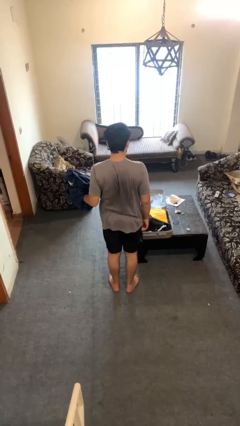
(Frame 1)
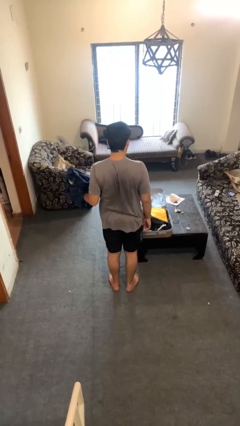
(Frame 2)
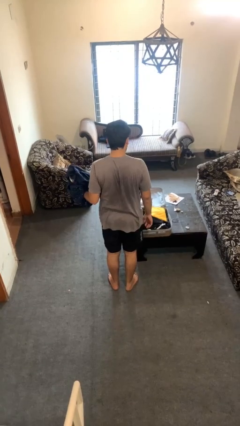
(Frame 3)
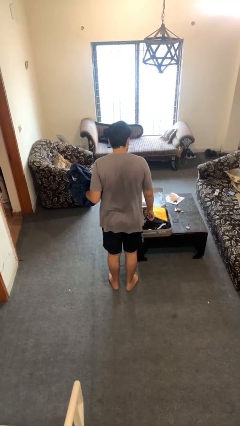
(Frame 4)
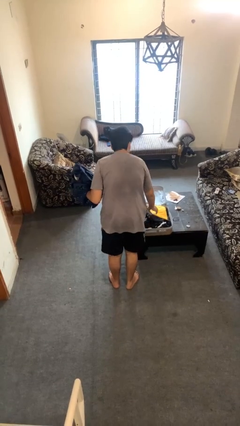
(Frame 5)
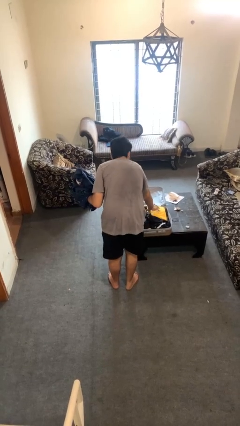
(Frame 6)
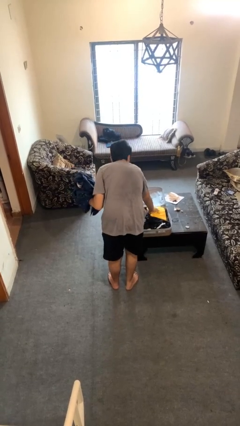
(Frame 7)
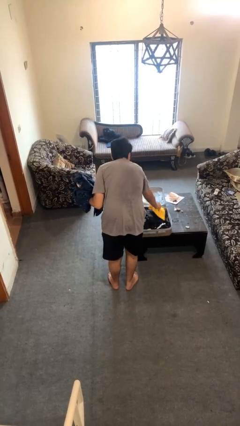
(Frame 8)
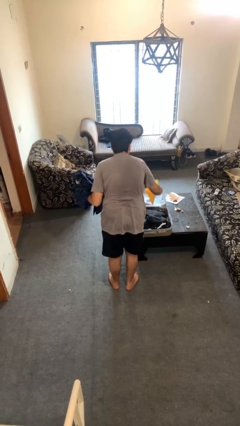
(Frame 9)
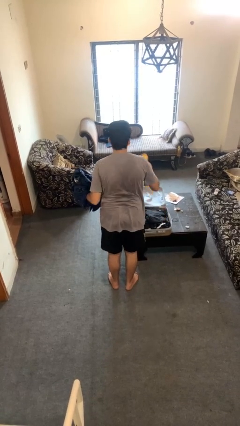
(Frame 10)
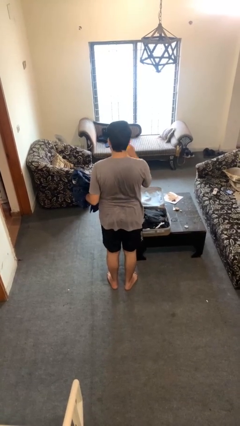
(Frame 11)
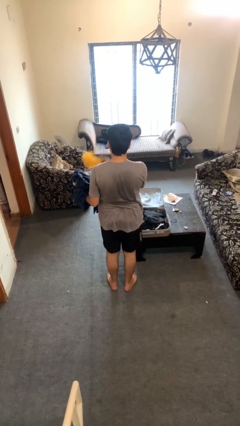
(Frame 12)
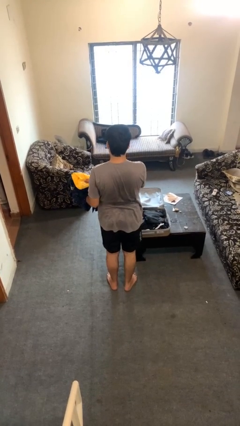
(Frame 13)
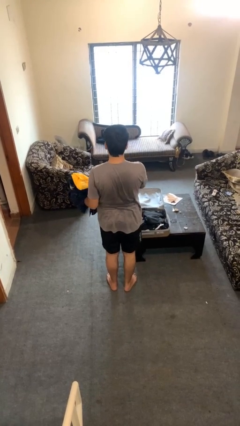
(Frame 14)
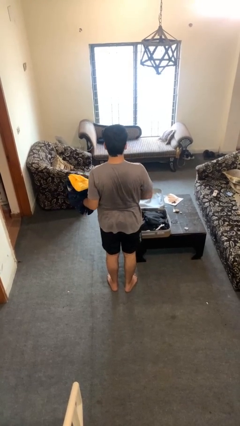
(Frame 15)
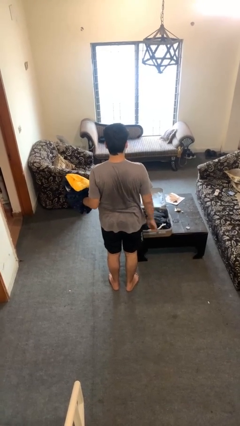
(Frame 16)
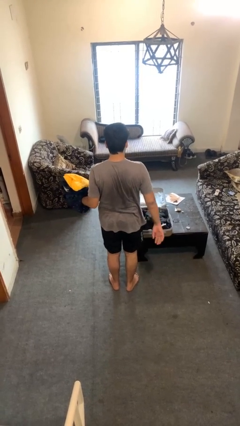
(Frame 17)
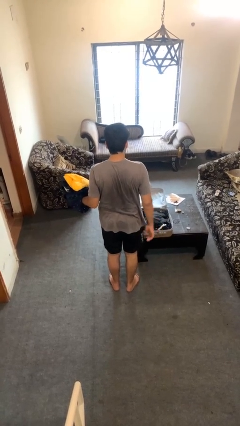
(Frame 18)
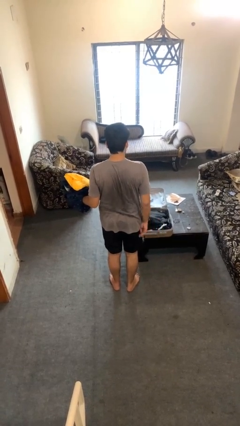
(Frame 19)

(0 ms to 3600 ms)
person unloads clothes from suitcase

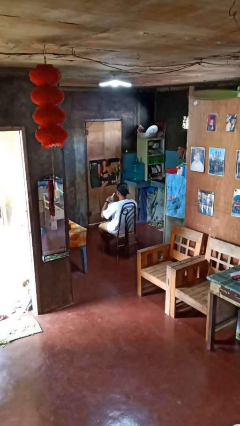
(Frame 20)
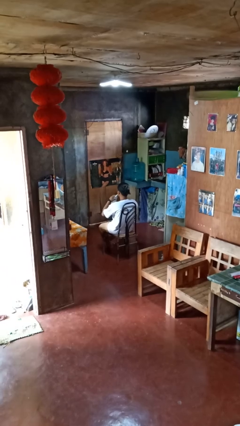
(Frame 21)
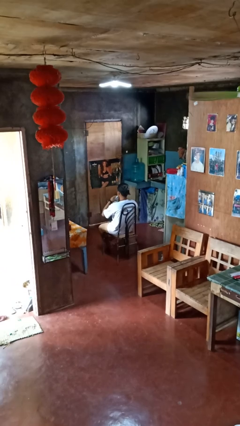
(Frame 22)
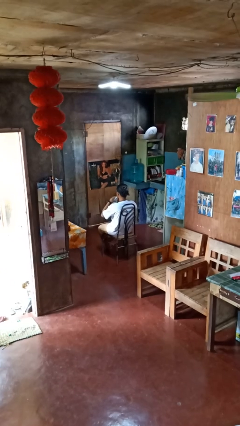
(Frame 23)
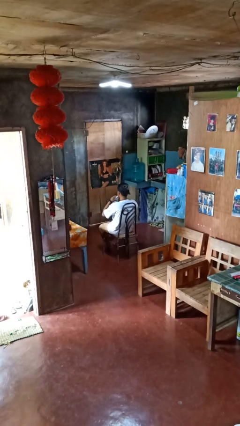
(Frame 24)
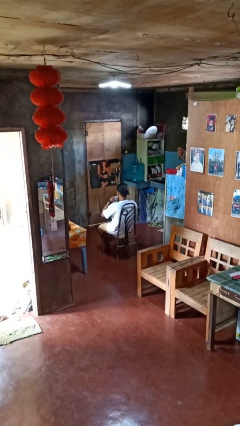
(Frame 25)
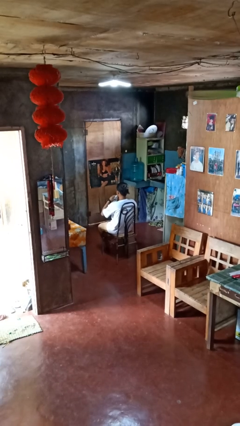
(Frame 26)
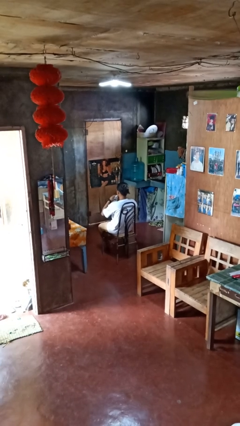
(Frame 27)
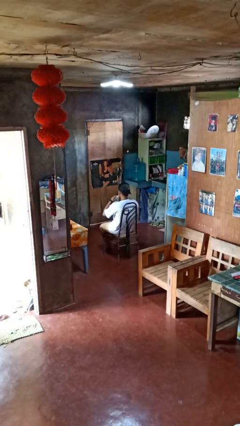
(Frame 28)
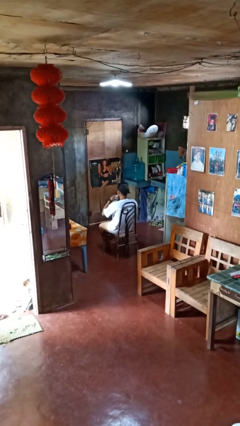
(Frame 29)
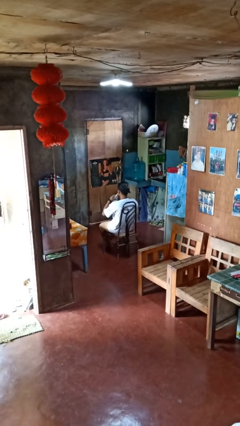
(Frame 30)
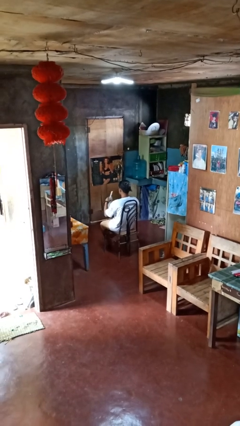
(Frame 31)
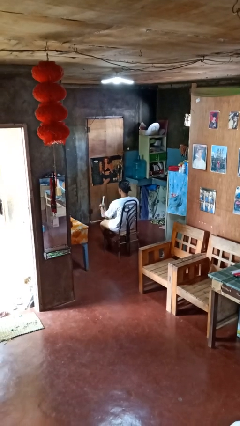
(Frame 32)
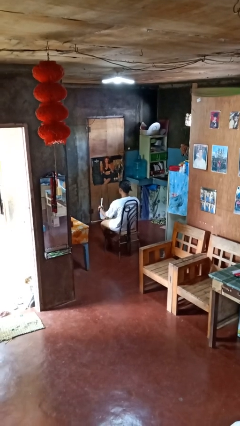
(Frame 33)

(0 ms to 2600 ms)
person drinks from straw

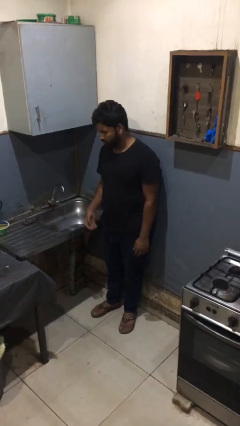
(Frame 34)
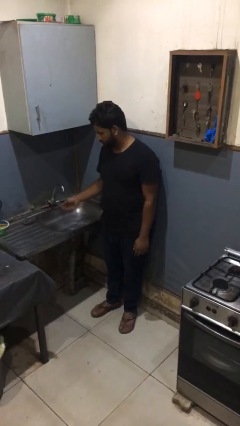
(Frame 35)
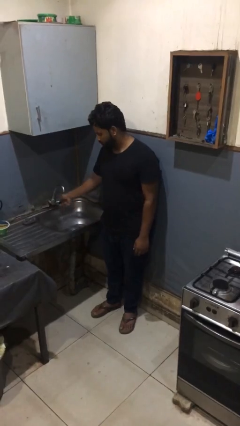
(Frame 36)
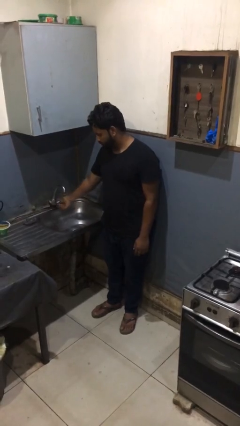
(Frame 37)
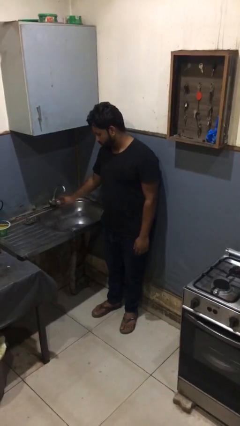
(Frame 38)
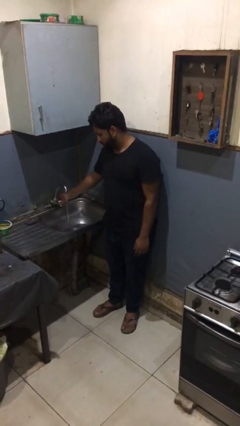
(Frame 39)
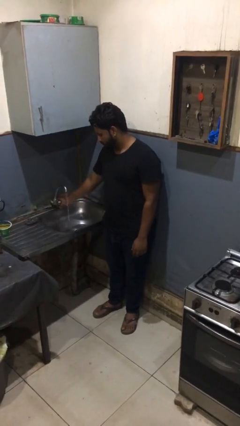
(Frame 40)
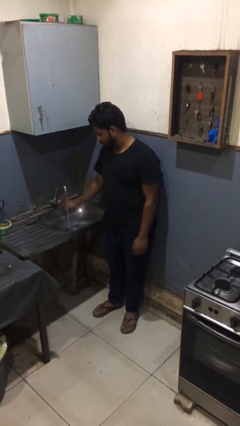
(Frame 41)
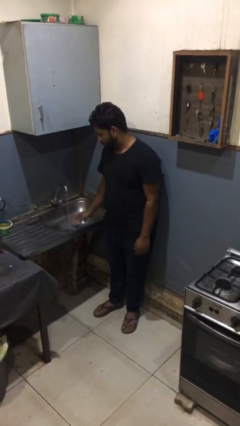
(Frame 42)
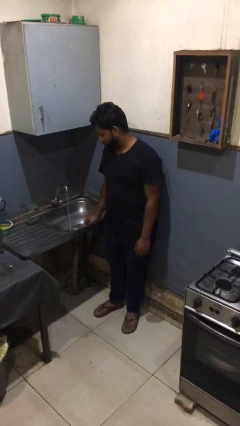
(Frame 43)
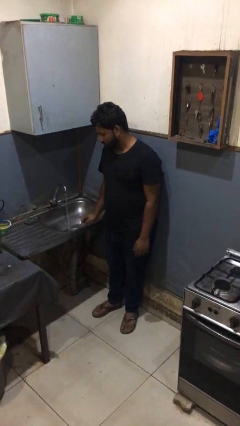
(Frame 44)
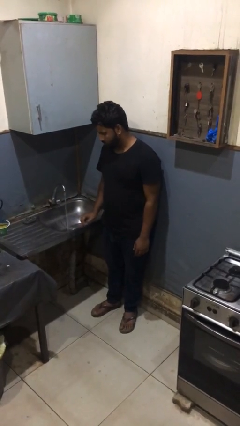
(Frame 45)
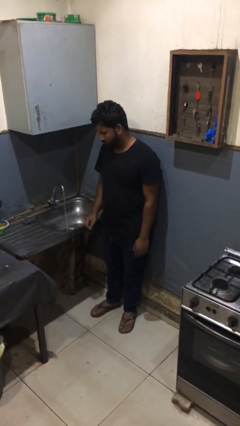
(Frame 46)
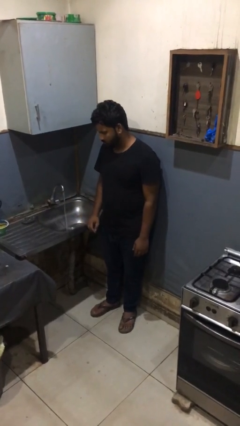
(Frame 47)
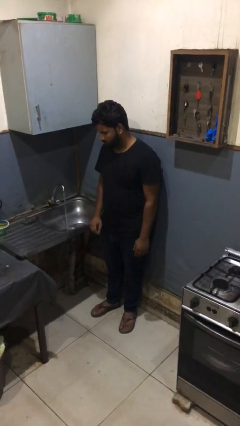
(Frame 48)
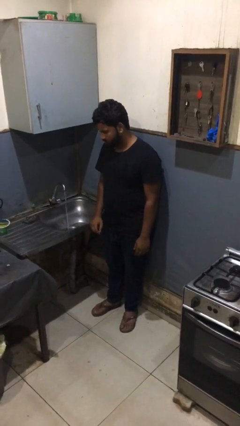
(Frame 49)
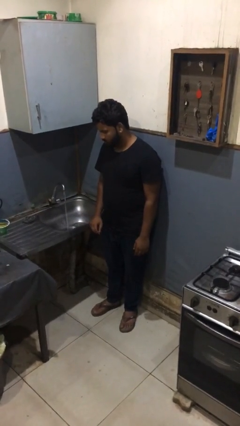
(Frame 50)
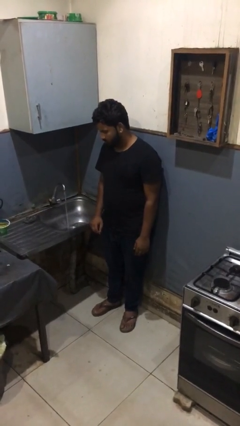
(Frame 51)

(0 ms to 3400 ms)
person turns on faucet

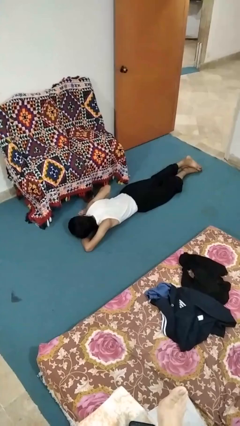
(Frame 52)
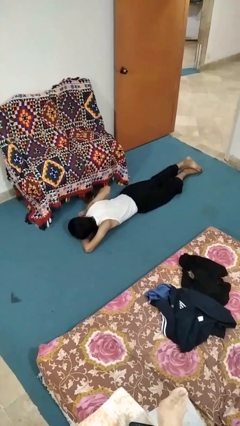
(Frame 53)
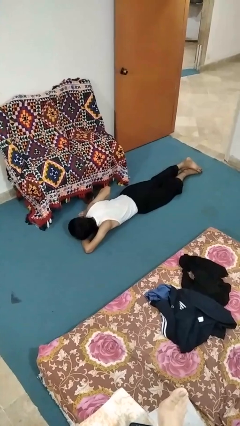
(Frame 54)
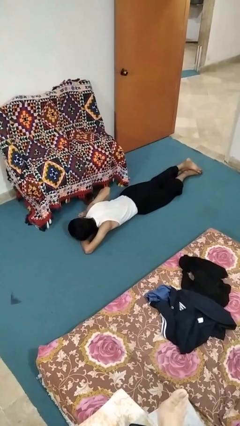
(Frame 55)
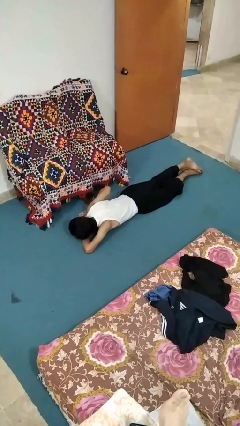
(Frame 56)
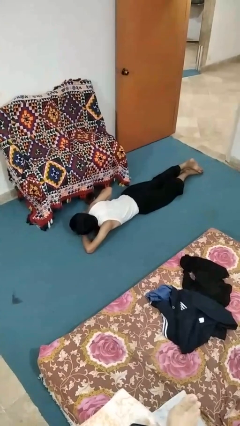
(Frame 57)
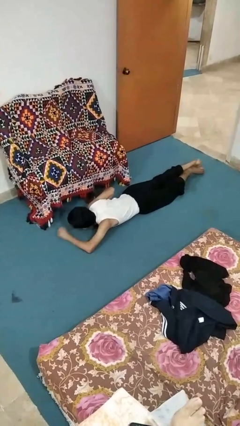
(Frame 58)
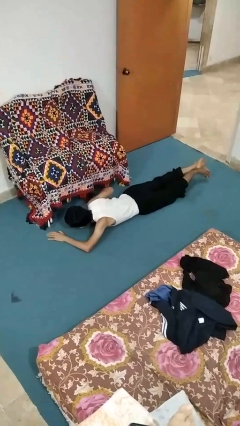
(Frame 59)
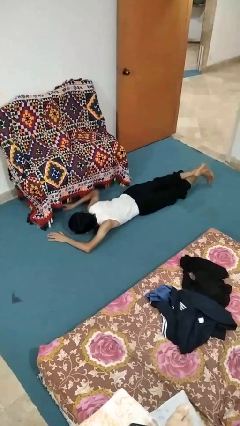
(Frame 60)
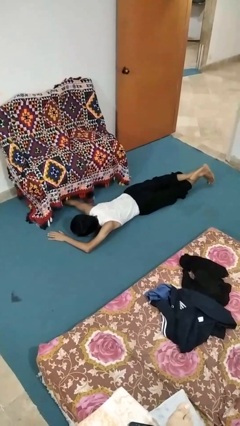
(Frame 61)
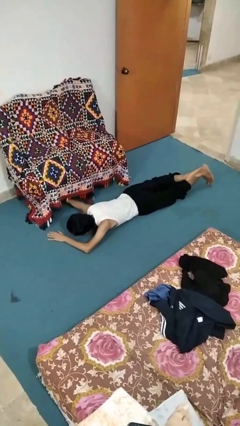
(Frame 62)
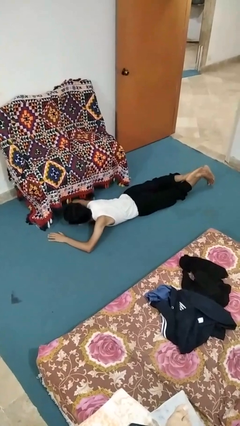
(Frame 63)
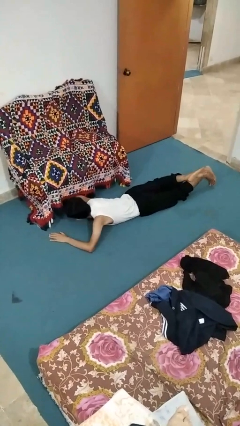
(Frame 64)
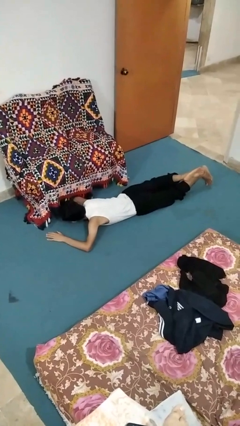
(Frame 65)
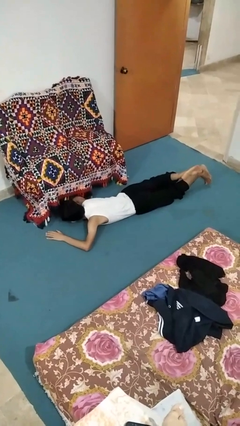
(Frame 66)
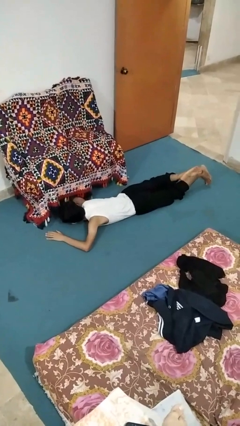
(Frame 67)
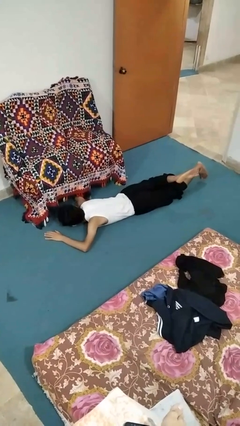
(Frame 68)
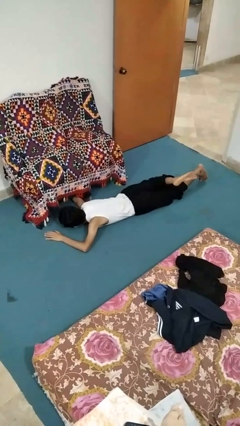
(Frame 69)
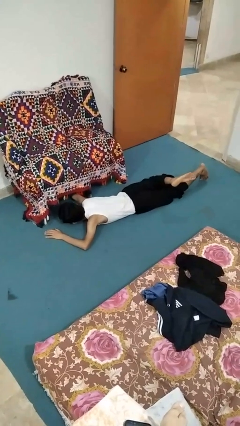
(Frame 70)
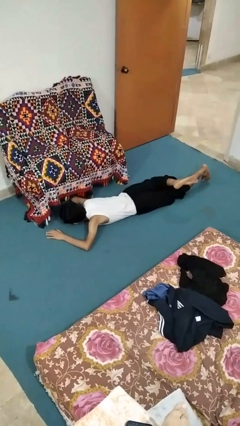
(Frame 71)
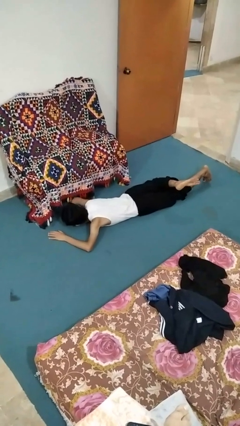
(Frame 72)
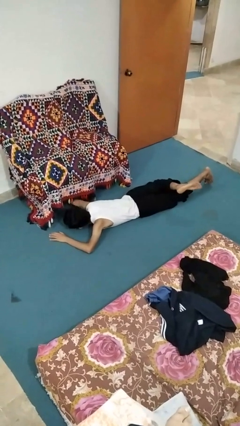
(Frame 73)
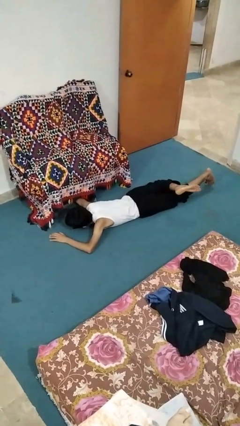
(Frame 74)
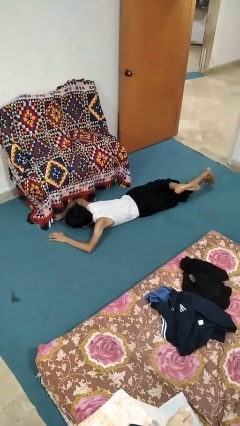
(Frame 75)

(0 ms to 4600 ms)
person searches under couch

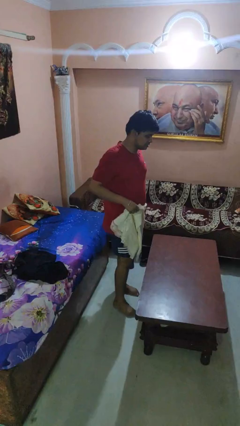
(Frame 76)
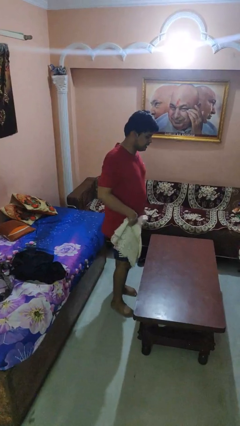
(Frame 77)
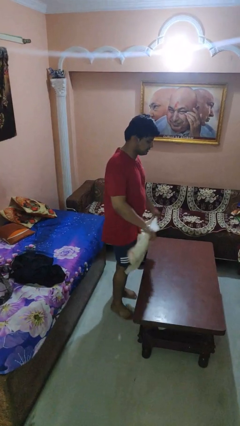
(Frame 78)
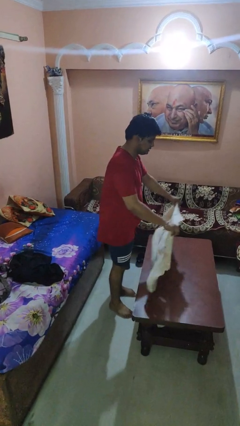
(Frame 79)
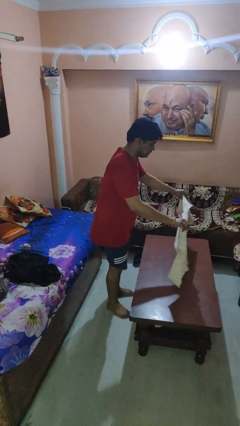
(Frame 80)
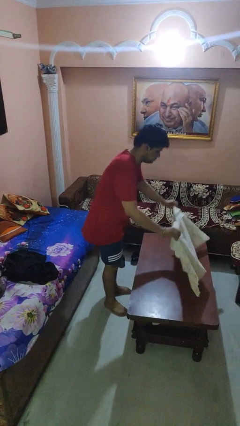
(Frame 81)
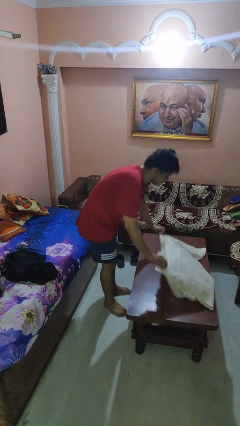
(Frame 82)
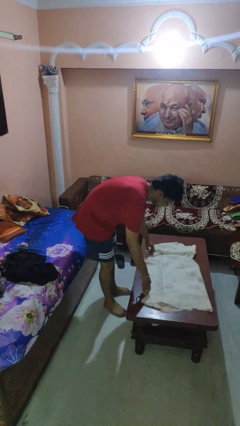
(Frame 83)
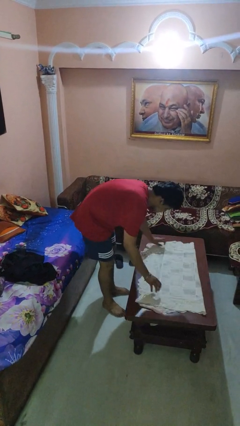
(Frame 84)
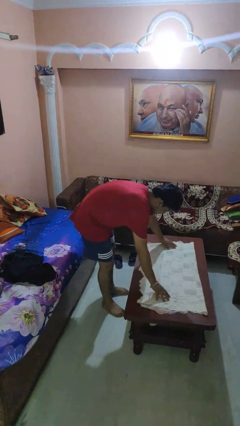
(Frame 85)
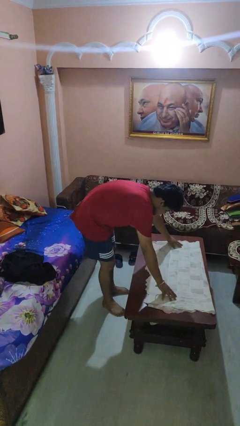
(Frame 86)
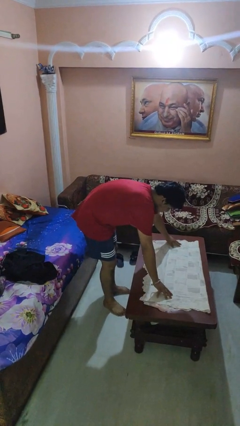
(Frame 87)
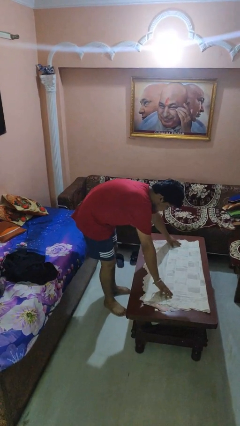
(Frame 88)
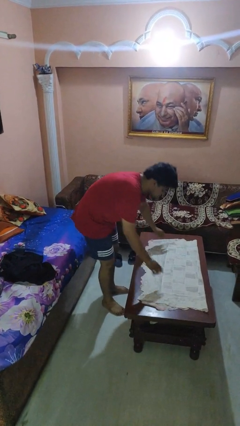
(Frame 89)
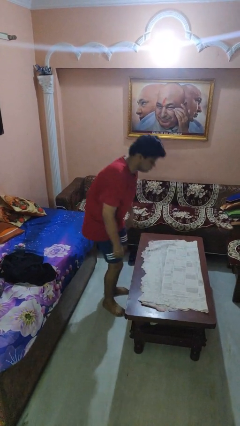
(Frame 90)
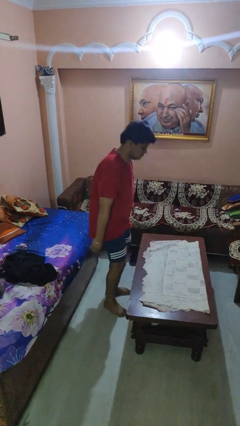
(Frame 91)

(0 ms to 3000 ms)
person spreads tablecloth

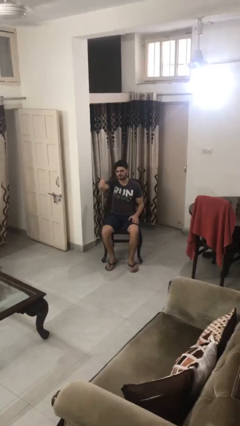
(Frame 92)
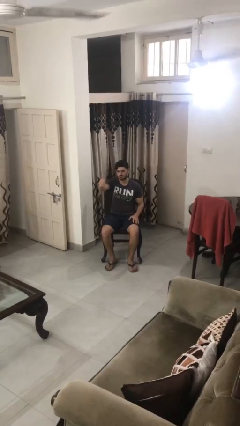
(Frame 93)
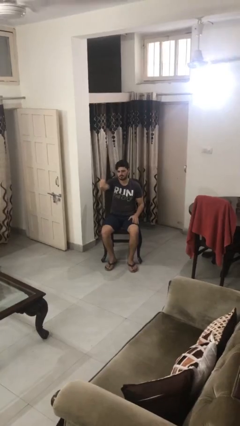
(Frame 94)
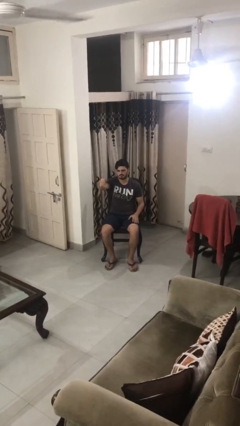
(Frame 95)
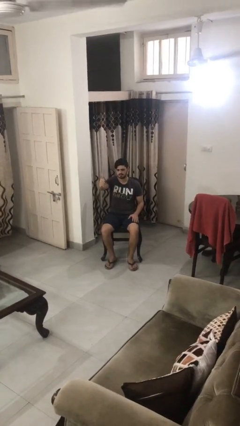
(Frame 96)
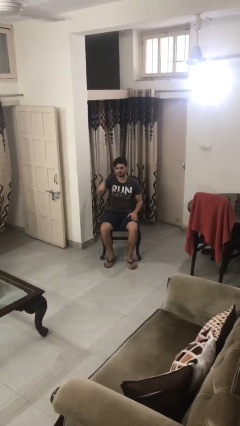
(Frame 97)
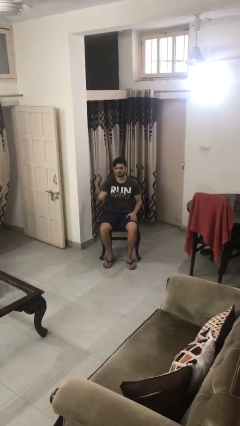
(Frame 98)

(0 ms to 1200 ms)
person gestures thumbs up
